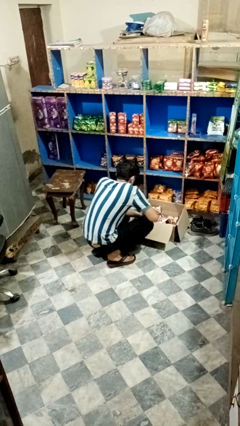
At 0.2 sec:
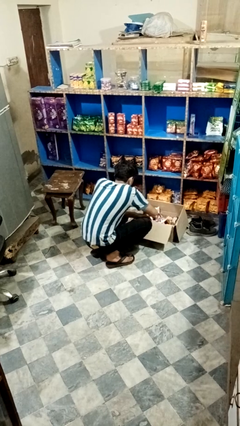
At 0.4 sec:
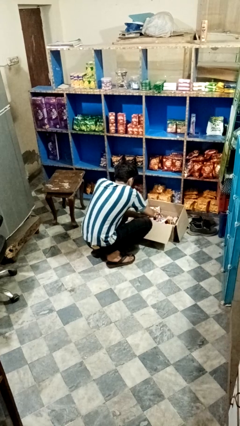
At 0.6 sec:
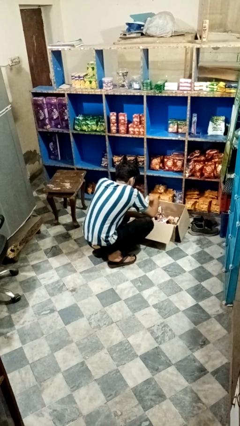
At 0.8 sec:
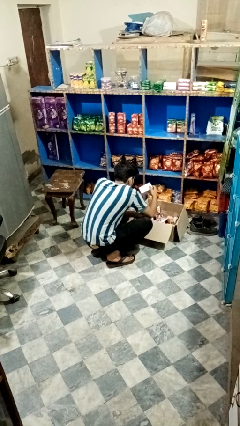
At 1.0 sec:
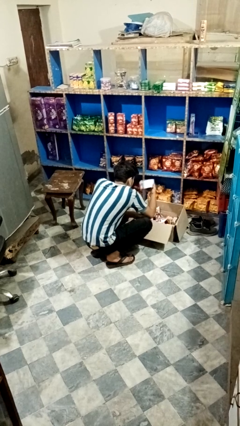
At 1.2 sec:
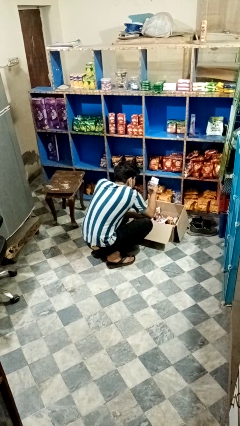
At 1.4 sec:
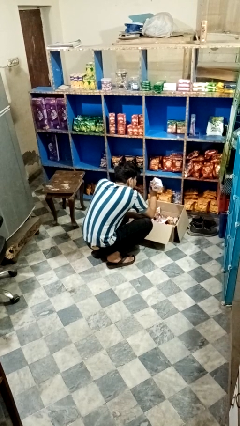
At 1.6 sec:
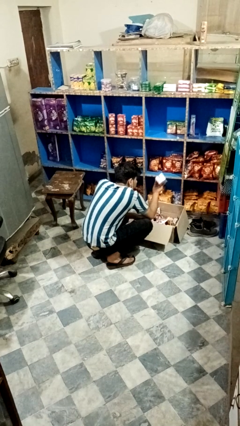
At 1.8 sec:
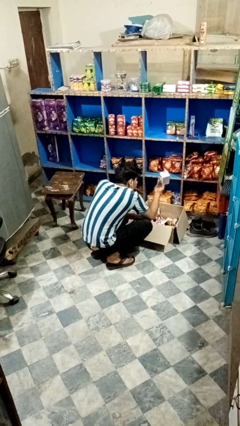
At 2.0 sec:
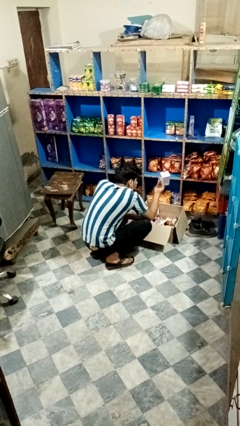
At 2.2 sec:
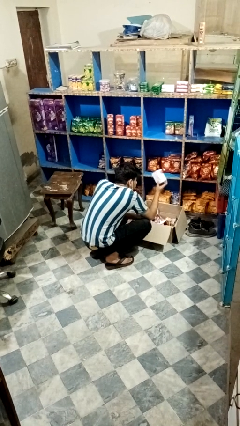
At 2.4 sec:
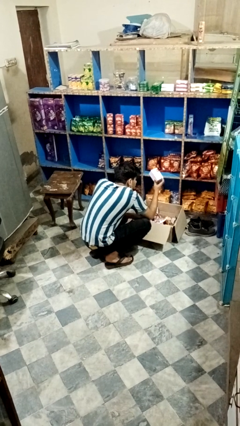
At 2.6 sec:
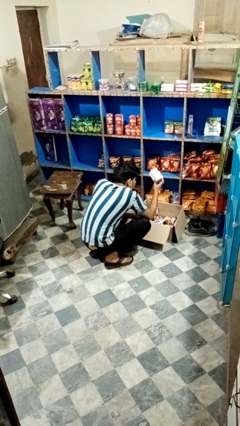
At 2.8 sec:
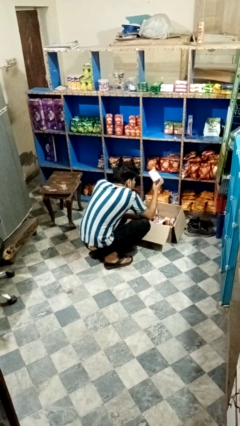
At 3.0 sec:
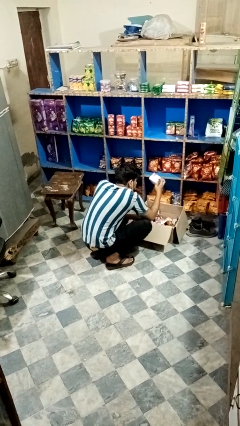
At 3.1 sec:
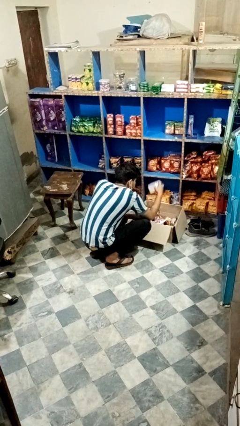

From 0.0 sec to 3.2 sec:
person searches in box

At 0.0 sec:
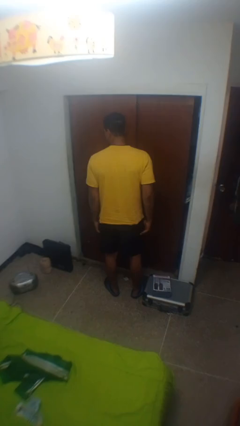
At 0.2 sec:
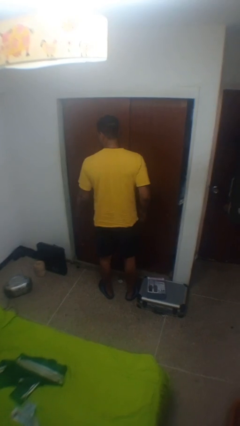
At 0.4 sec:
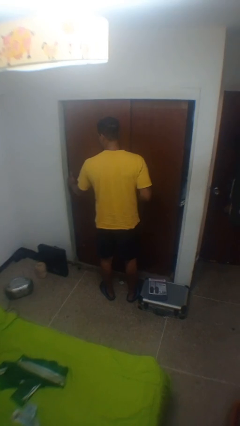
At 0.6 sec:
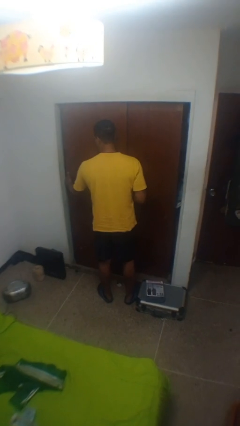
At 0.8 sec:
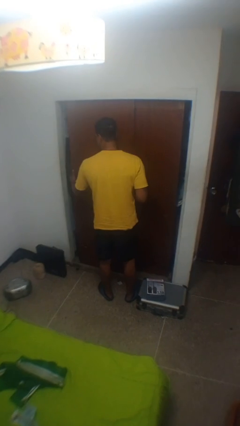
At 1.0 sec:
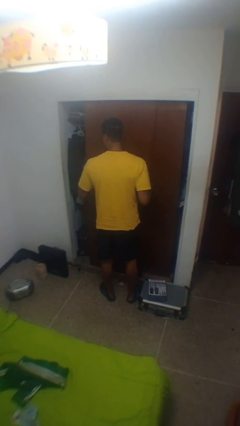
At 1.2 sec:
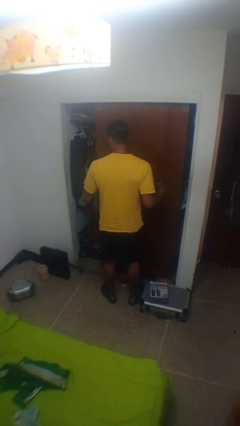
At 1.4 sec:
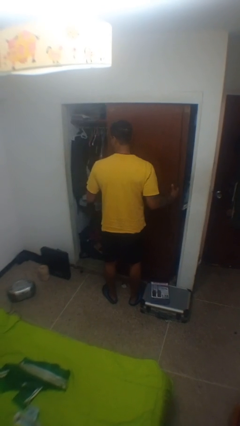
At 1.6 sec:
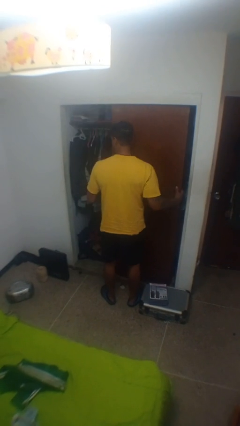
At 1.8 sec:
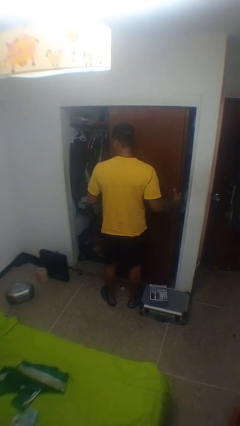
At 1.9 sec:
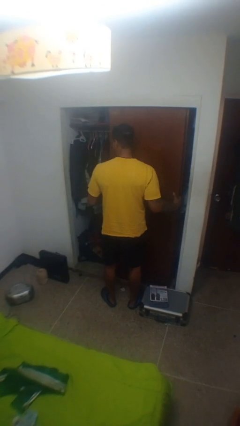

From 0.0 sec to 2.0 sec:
person opens closet door

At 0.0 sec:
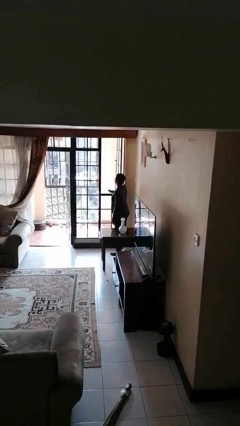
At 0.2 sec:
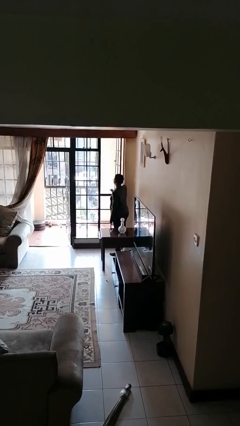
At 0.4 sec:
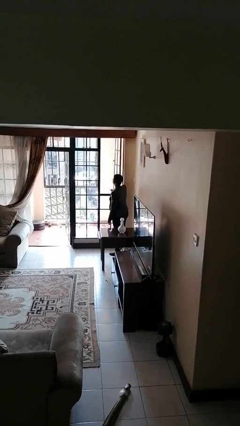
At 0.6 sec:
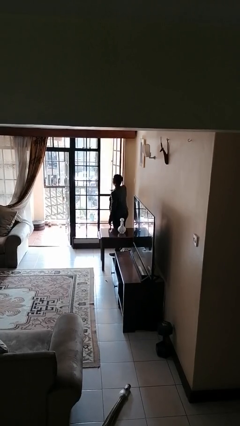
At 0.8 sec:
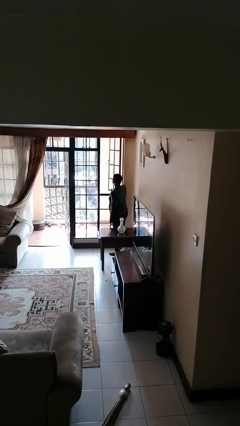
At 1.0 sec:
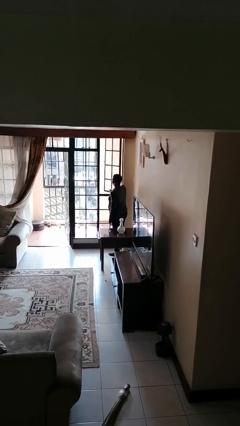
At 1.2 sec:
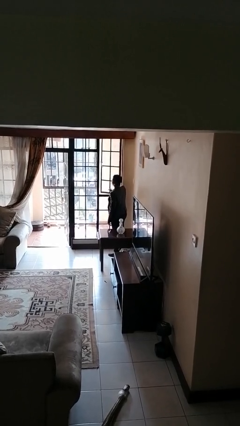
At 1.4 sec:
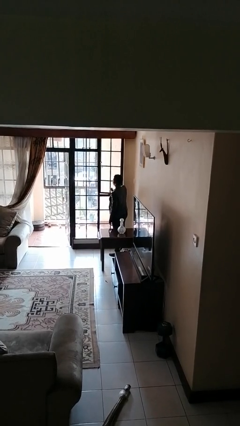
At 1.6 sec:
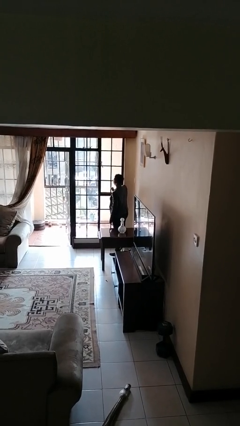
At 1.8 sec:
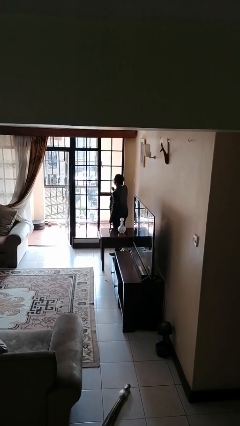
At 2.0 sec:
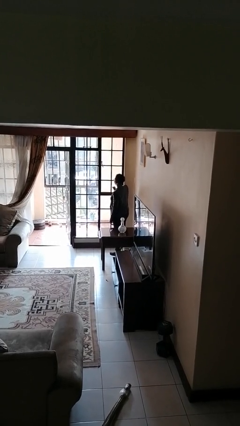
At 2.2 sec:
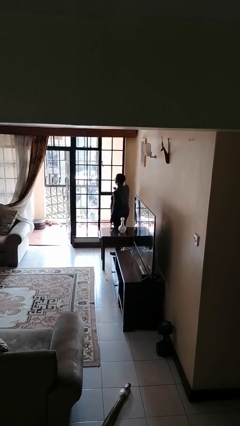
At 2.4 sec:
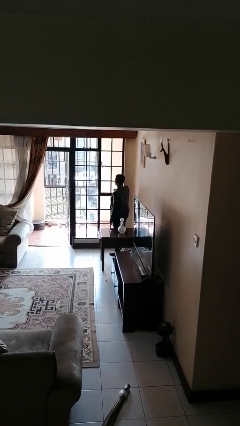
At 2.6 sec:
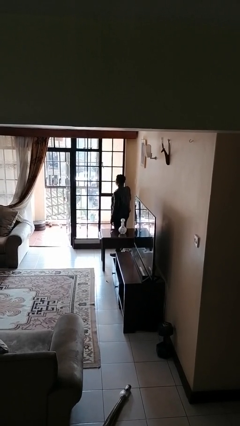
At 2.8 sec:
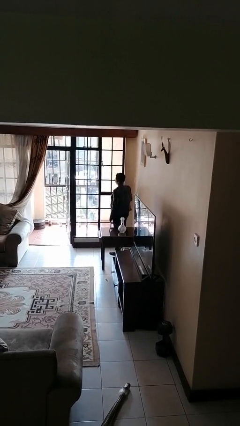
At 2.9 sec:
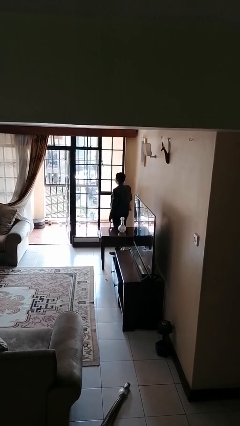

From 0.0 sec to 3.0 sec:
person closes home window

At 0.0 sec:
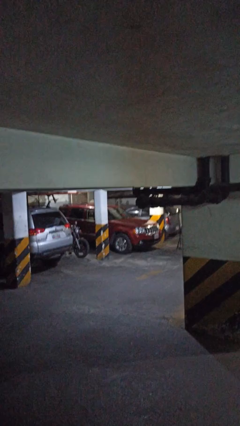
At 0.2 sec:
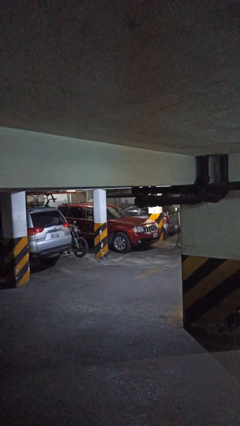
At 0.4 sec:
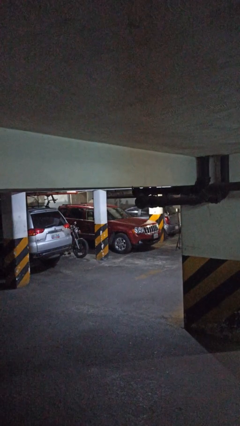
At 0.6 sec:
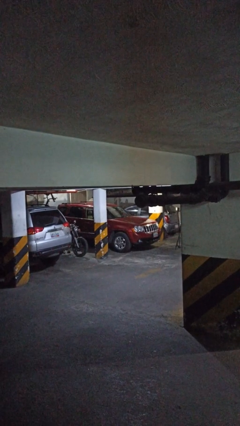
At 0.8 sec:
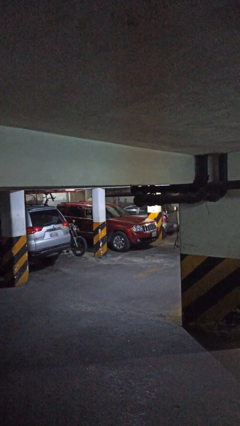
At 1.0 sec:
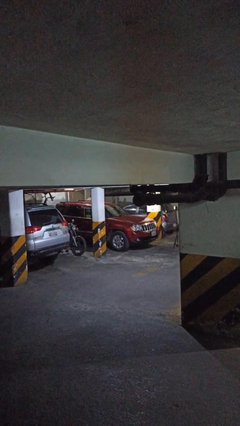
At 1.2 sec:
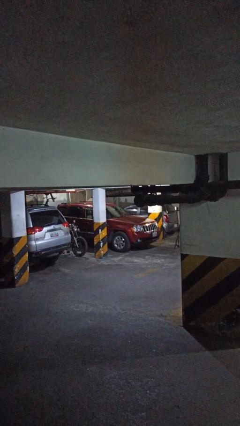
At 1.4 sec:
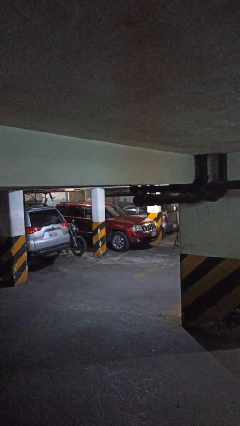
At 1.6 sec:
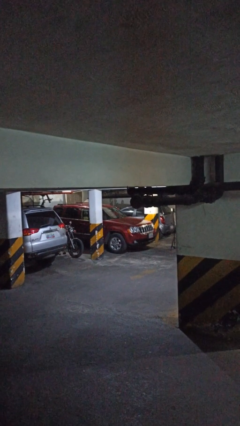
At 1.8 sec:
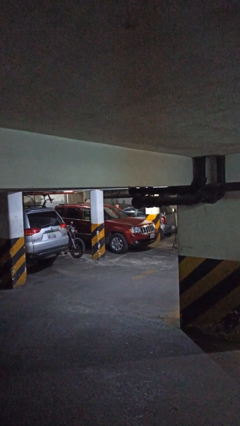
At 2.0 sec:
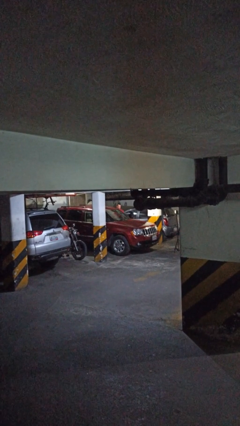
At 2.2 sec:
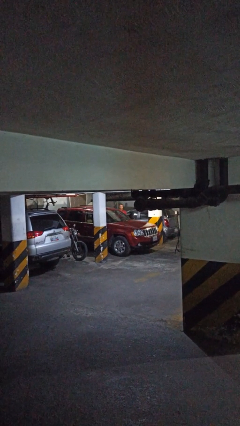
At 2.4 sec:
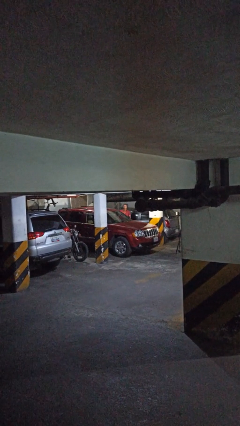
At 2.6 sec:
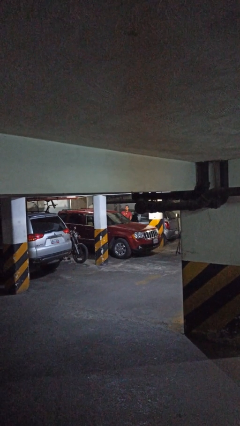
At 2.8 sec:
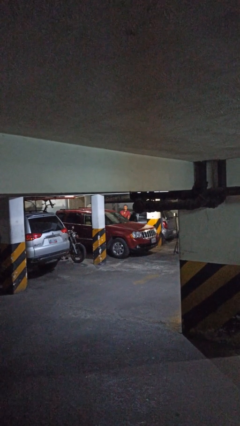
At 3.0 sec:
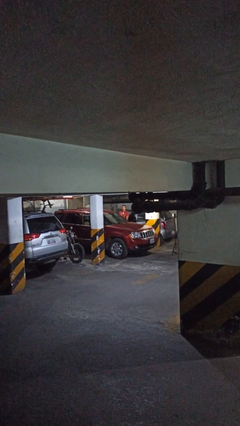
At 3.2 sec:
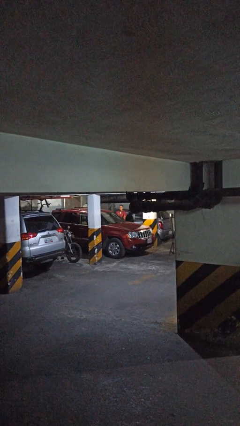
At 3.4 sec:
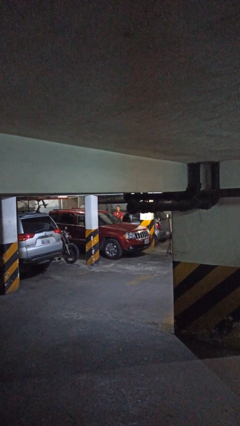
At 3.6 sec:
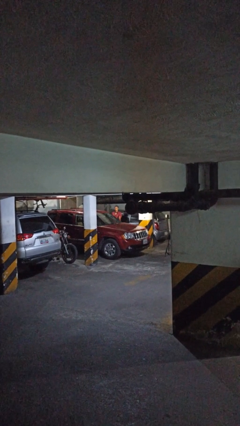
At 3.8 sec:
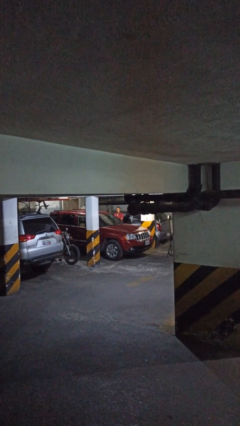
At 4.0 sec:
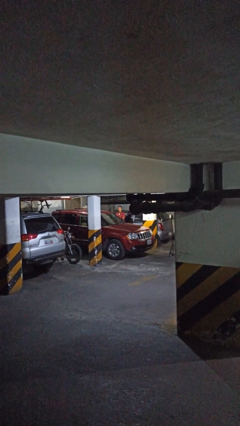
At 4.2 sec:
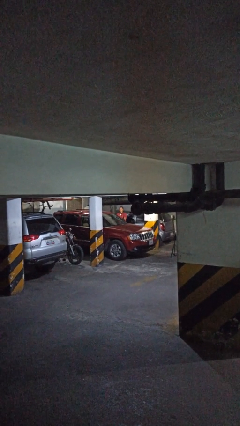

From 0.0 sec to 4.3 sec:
person exits car

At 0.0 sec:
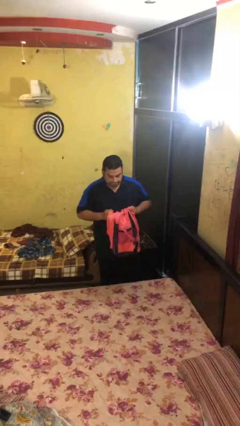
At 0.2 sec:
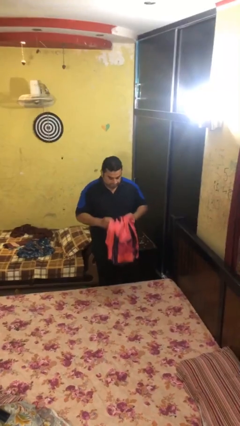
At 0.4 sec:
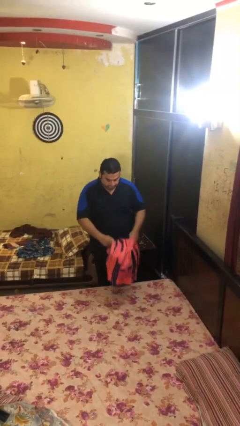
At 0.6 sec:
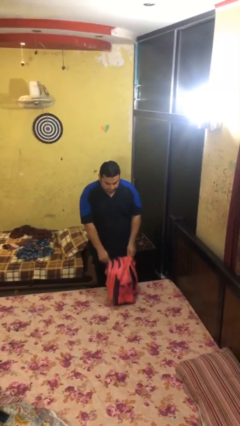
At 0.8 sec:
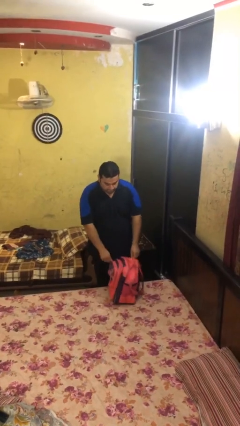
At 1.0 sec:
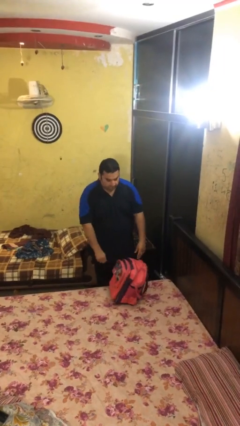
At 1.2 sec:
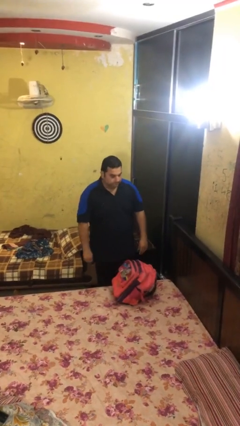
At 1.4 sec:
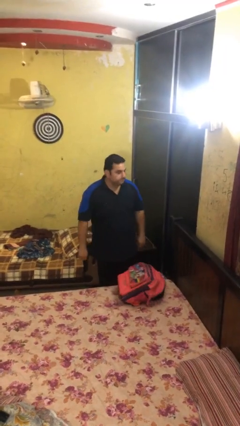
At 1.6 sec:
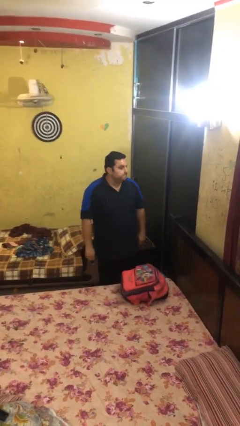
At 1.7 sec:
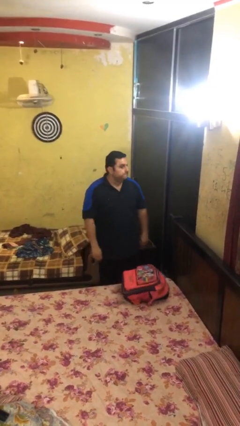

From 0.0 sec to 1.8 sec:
person puts down object on bed

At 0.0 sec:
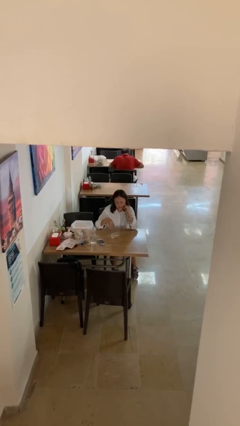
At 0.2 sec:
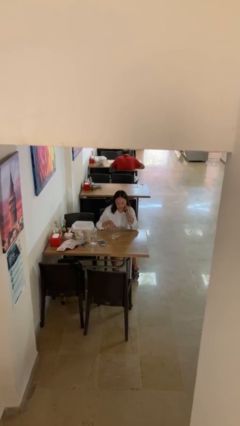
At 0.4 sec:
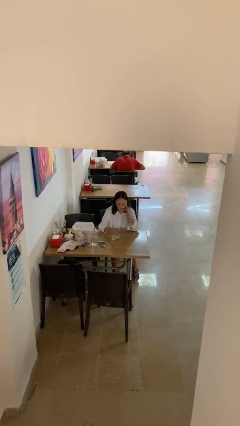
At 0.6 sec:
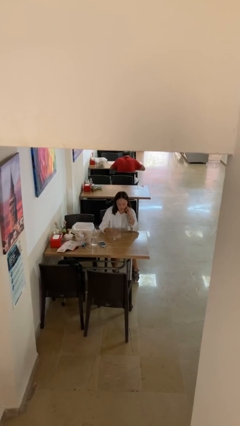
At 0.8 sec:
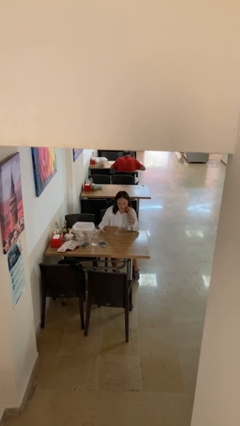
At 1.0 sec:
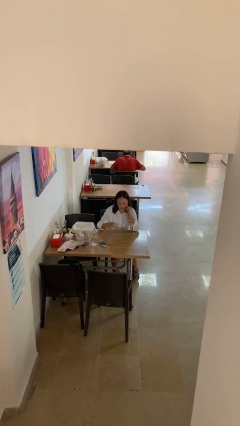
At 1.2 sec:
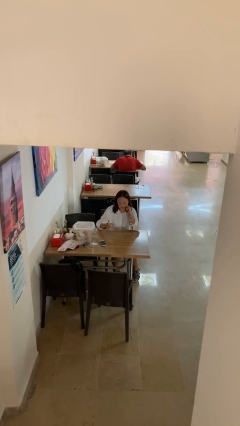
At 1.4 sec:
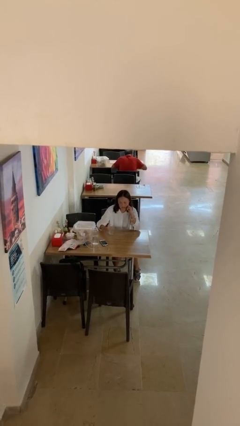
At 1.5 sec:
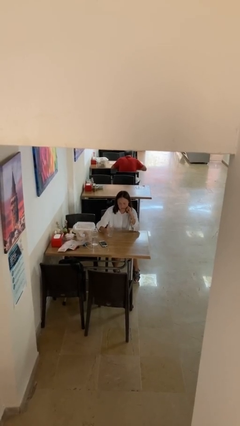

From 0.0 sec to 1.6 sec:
person sets upright glass

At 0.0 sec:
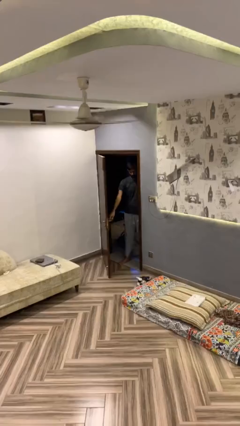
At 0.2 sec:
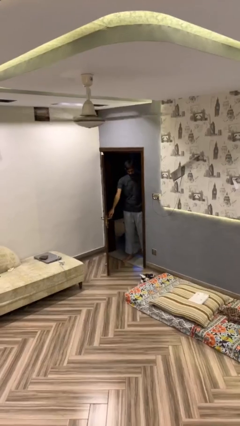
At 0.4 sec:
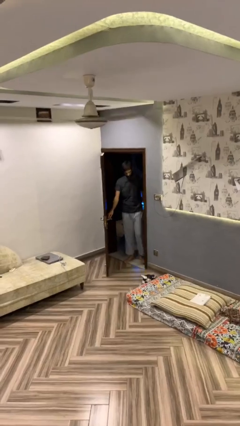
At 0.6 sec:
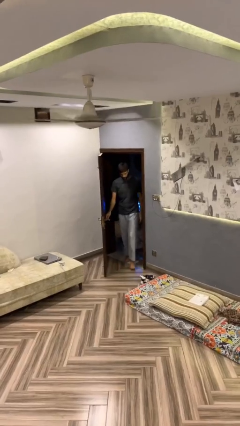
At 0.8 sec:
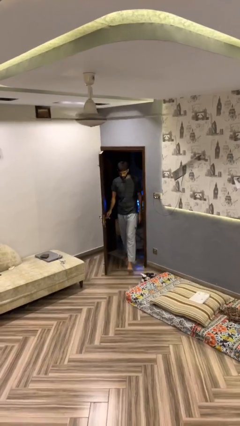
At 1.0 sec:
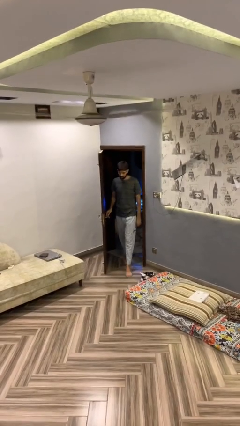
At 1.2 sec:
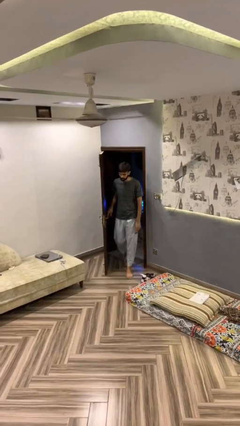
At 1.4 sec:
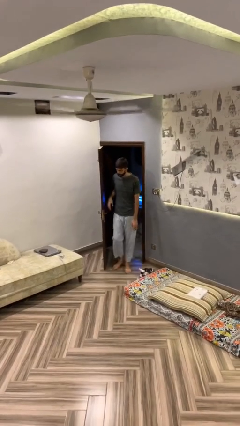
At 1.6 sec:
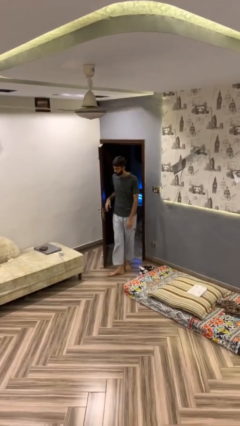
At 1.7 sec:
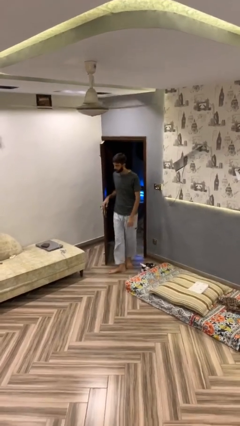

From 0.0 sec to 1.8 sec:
person enters scene through structure
